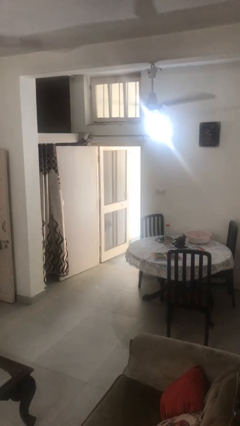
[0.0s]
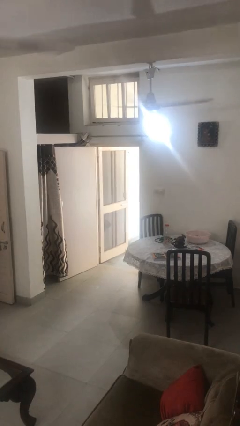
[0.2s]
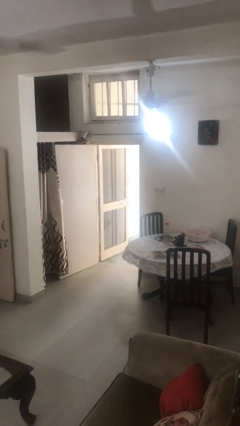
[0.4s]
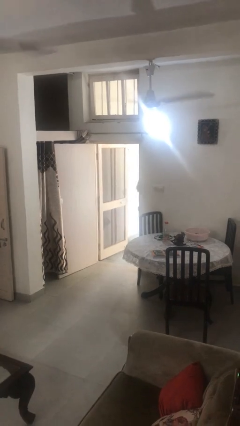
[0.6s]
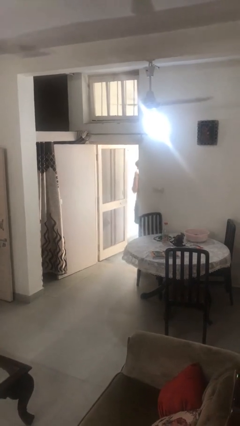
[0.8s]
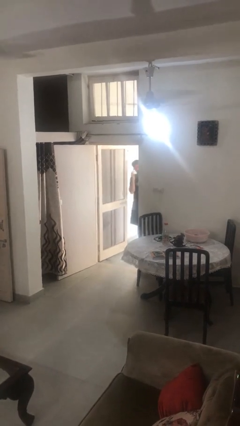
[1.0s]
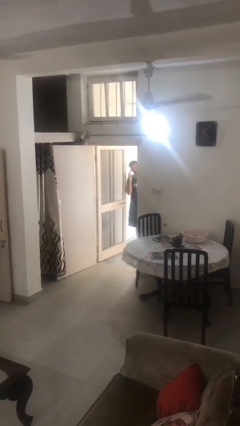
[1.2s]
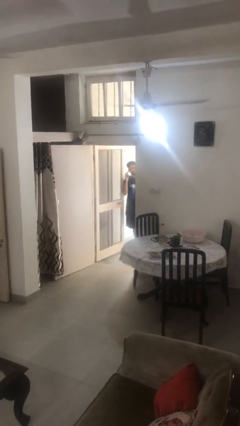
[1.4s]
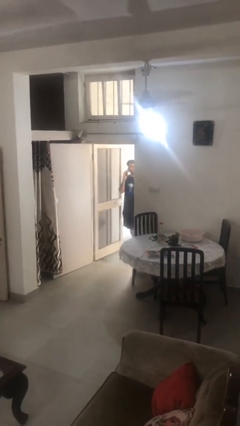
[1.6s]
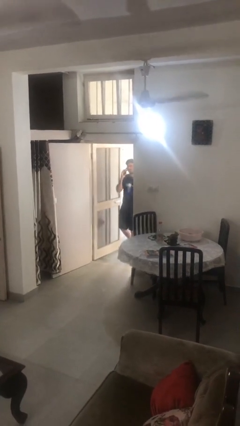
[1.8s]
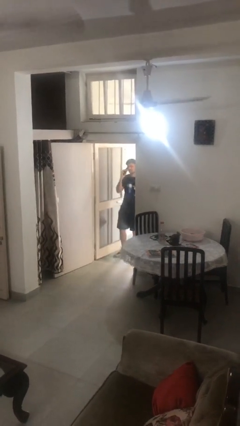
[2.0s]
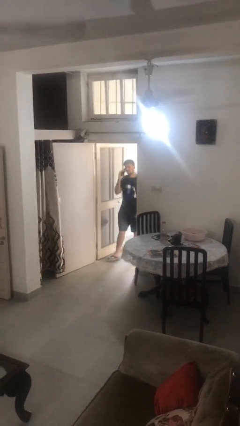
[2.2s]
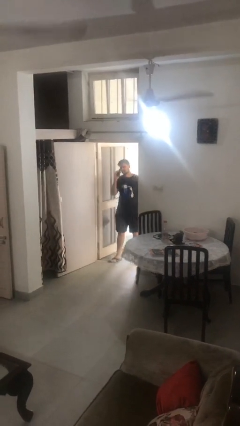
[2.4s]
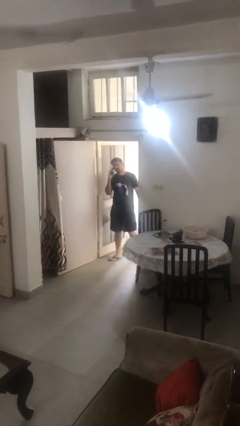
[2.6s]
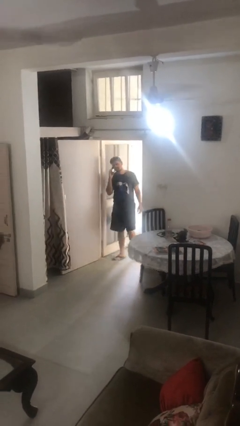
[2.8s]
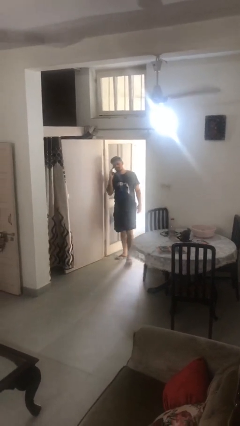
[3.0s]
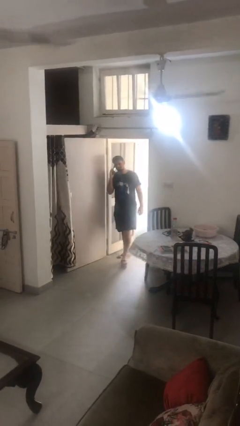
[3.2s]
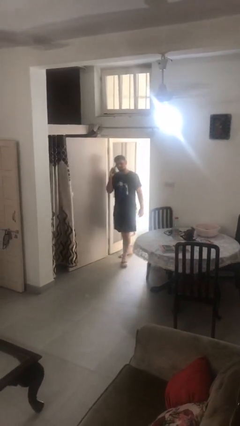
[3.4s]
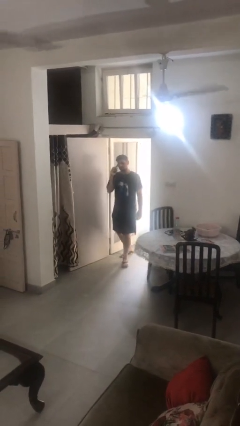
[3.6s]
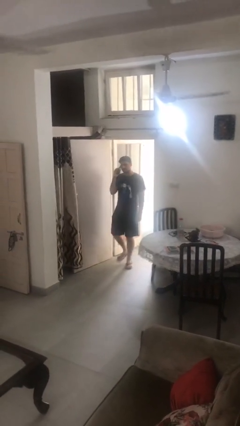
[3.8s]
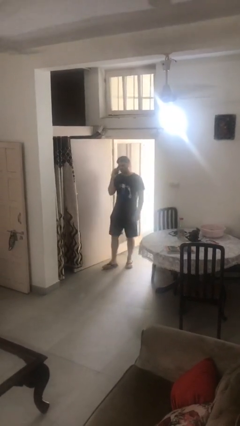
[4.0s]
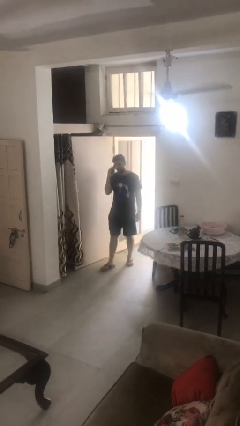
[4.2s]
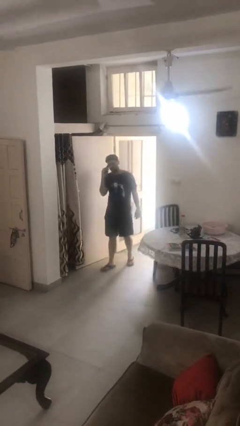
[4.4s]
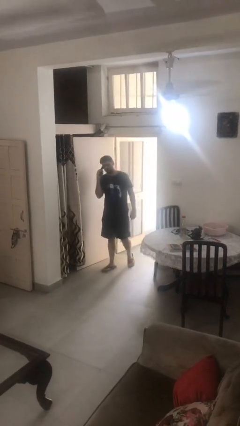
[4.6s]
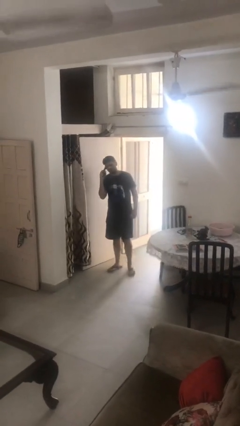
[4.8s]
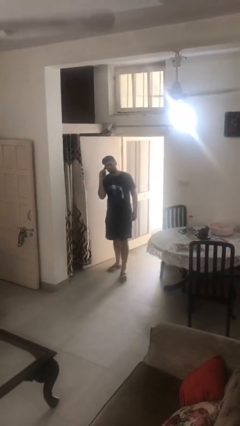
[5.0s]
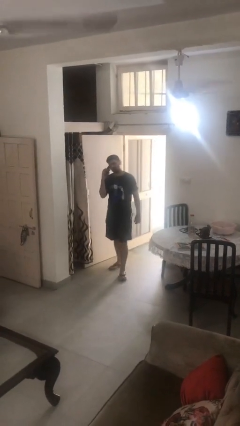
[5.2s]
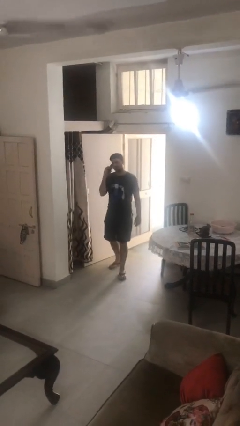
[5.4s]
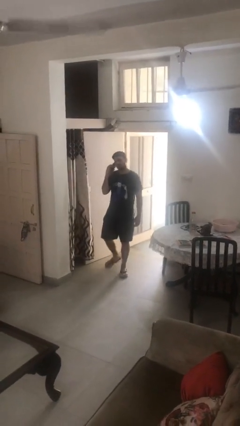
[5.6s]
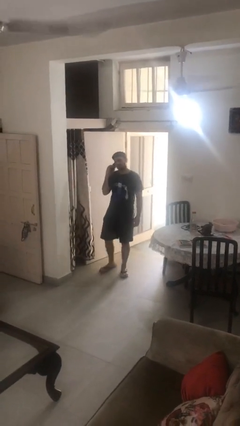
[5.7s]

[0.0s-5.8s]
person enters scene through structure

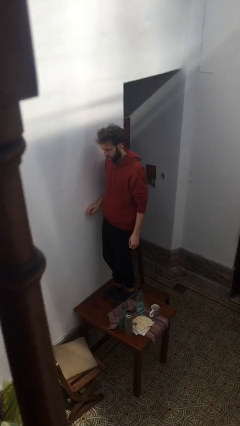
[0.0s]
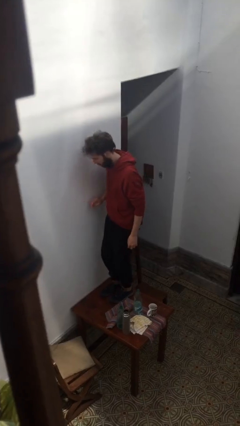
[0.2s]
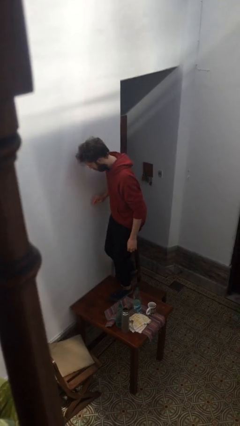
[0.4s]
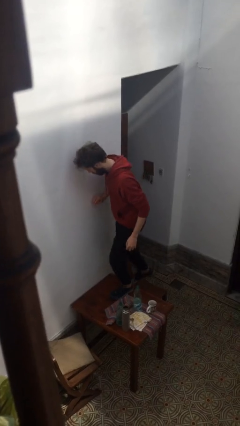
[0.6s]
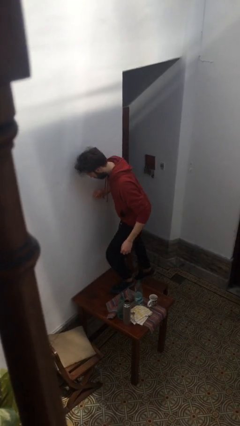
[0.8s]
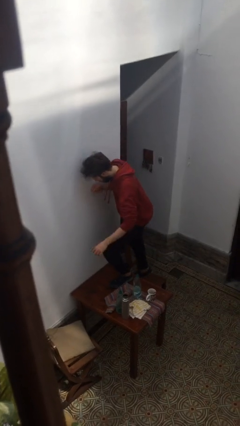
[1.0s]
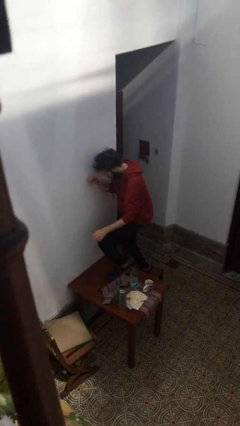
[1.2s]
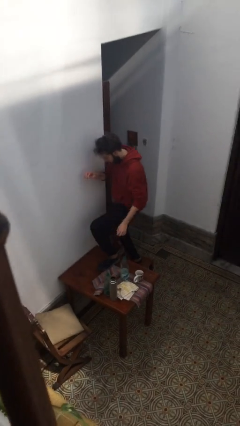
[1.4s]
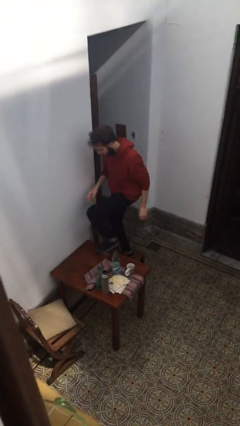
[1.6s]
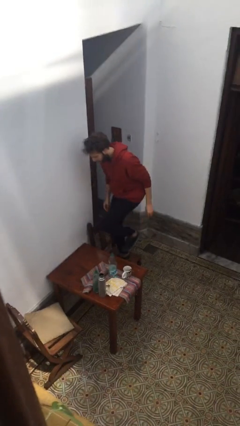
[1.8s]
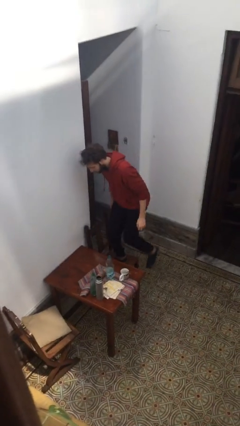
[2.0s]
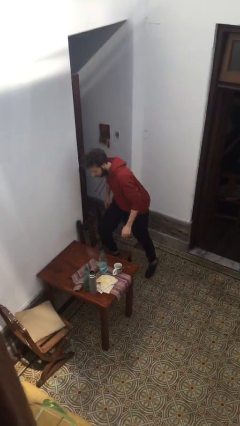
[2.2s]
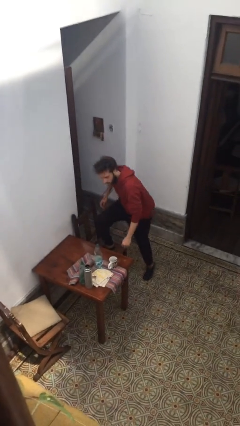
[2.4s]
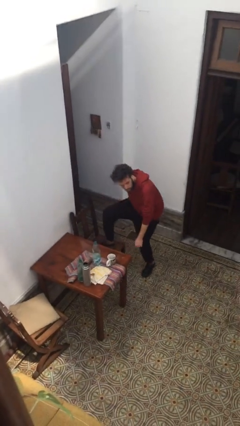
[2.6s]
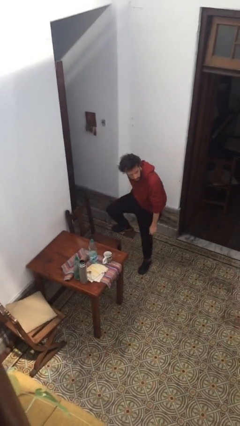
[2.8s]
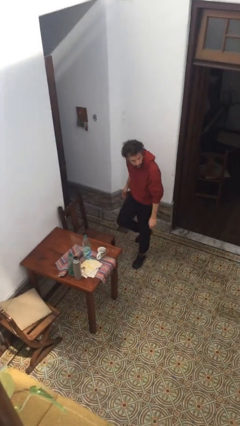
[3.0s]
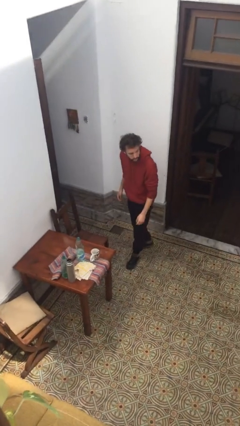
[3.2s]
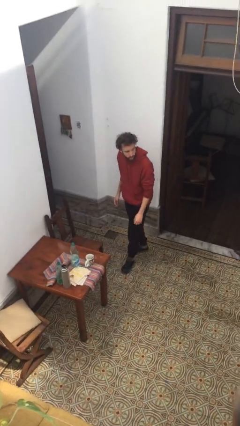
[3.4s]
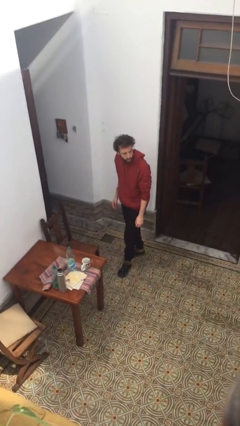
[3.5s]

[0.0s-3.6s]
person climbs off table

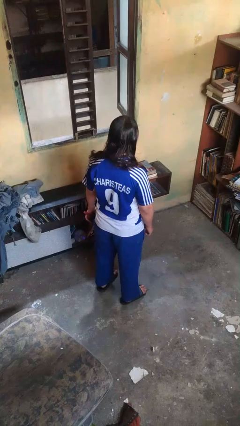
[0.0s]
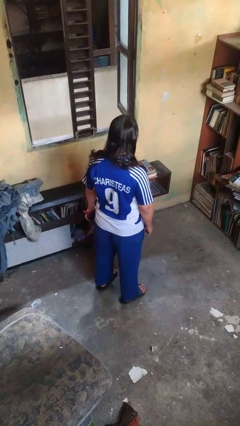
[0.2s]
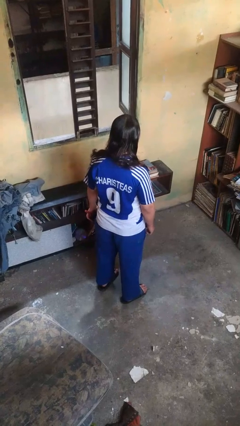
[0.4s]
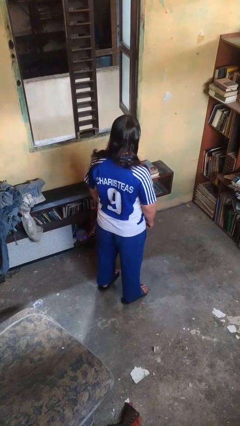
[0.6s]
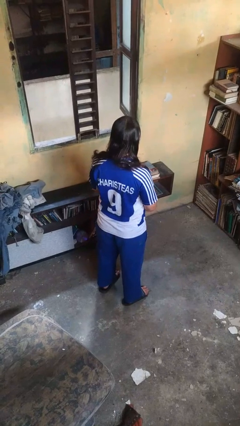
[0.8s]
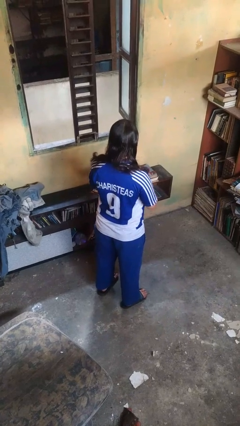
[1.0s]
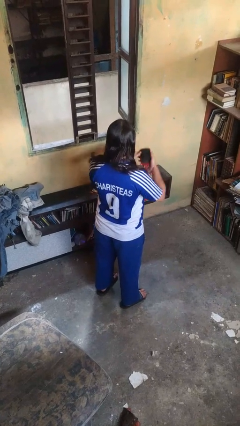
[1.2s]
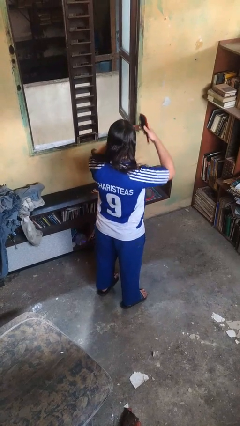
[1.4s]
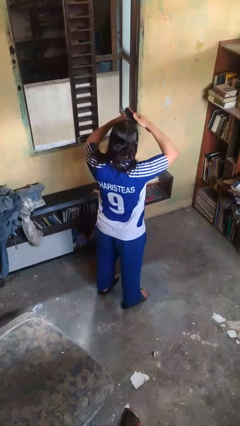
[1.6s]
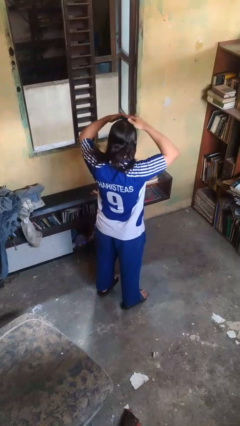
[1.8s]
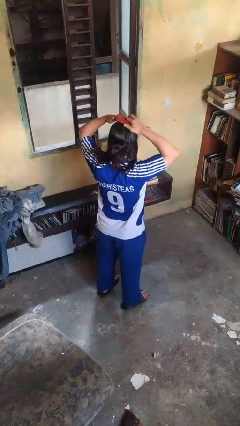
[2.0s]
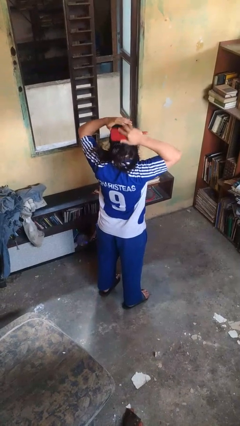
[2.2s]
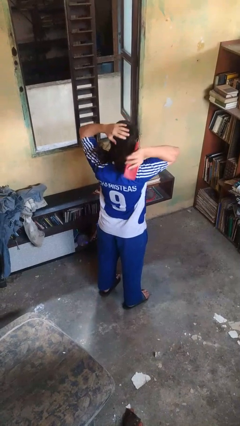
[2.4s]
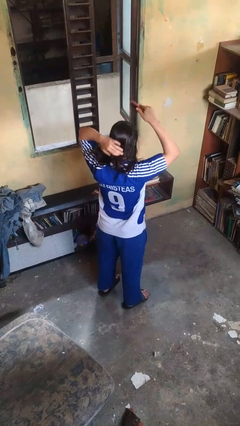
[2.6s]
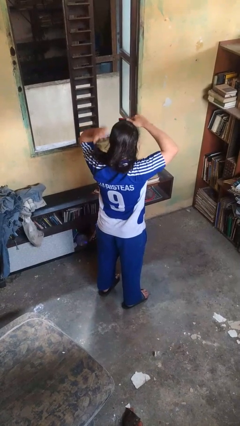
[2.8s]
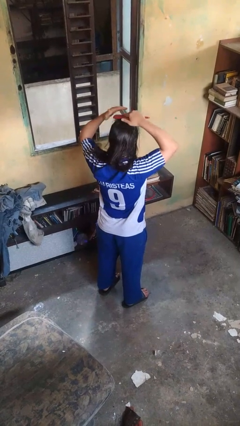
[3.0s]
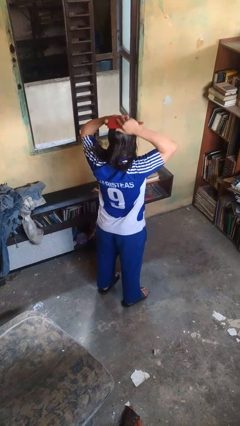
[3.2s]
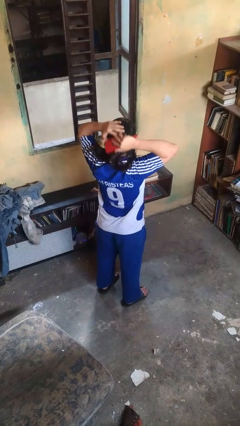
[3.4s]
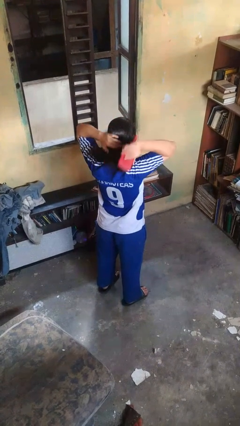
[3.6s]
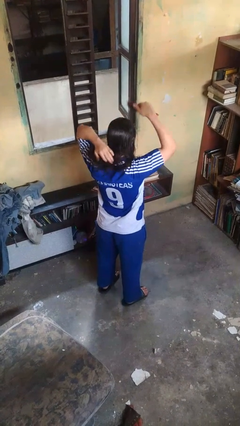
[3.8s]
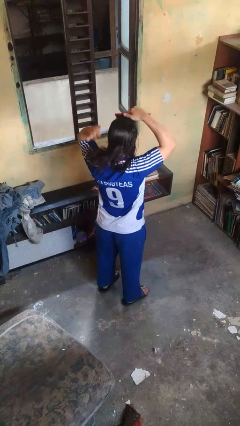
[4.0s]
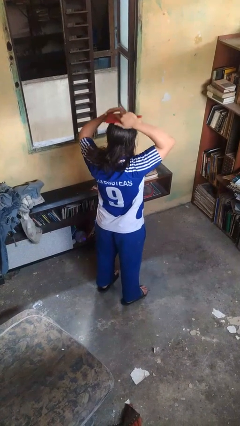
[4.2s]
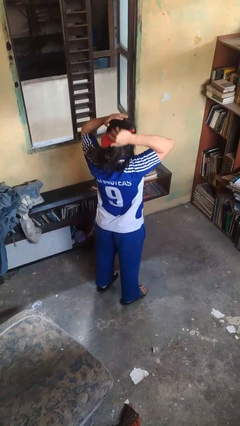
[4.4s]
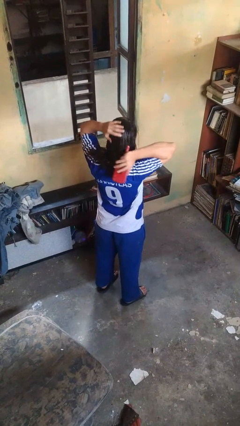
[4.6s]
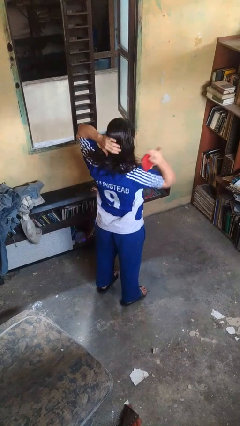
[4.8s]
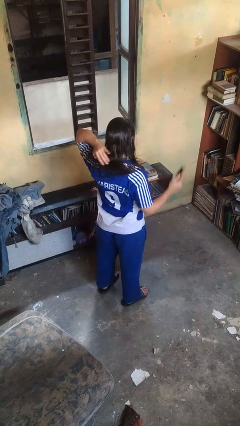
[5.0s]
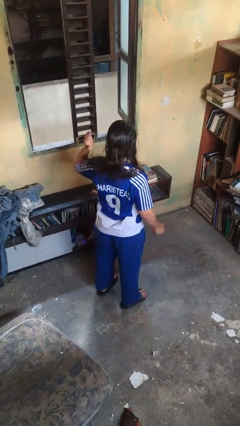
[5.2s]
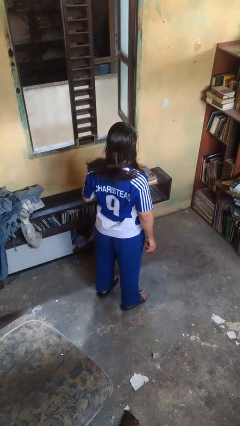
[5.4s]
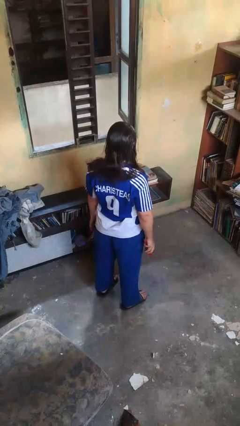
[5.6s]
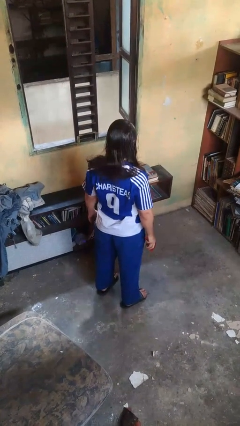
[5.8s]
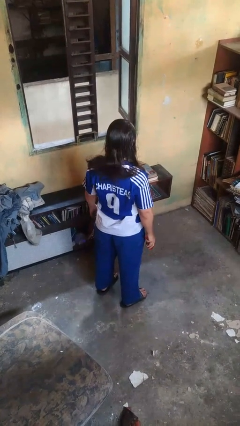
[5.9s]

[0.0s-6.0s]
person brushes hair

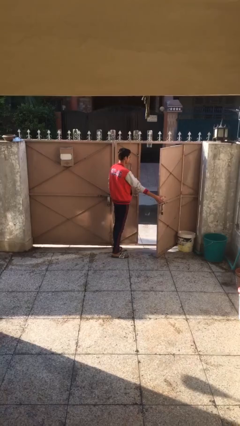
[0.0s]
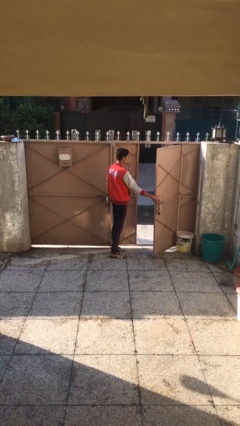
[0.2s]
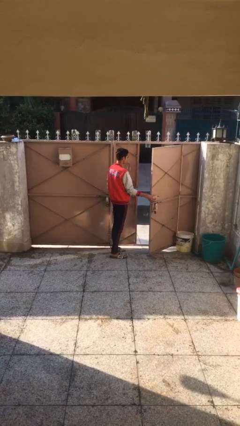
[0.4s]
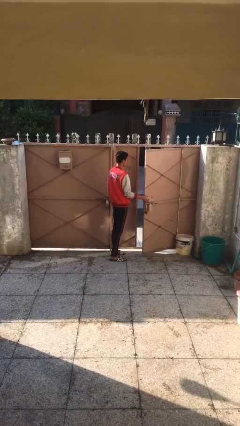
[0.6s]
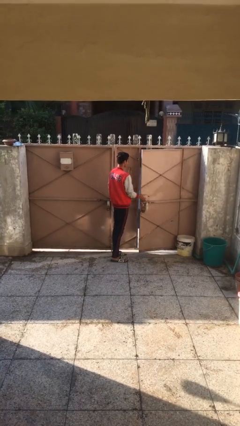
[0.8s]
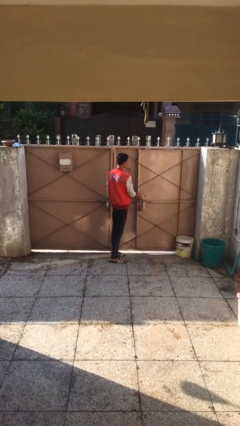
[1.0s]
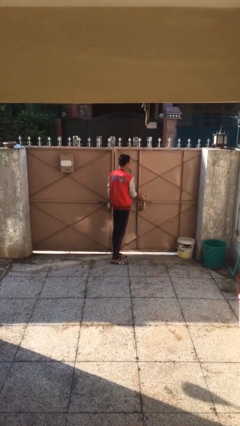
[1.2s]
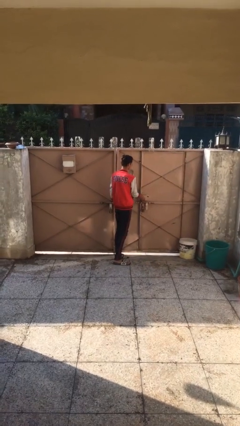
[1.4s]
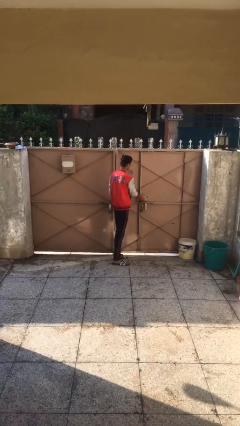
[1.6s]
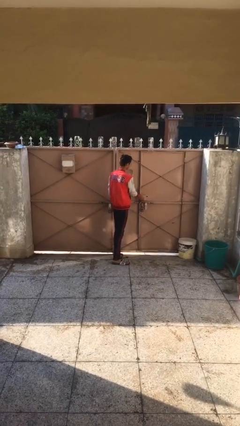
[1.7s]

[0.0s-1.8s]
person closes facility door

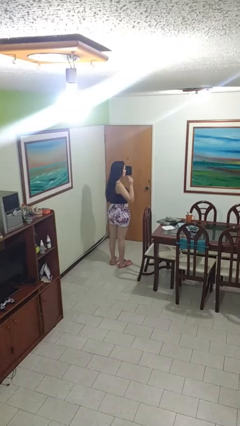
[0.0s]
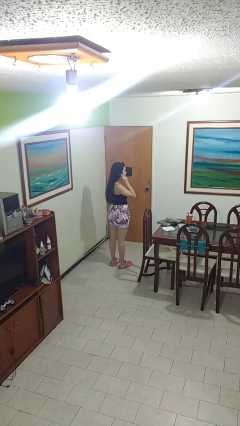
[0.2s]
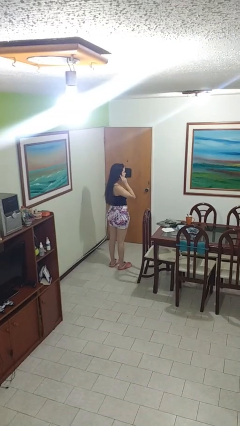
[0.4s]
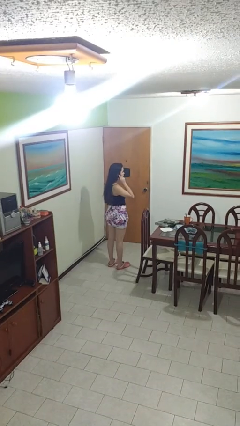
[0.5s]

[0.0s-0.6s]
person gestures listen closely
